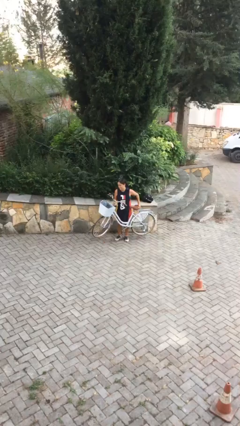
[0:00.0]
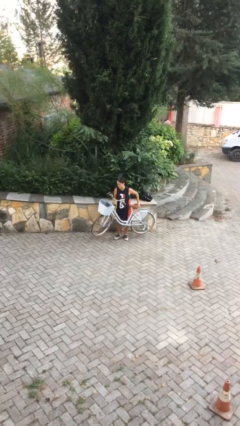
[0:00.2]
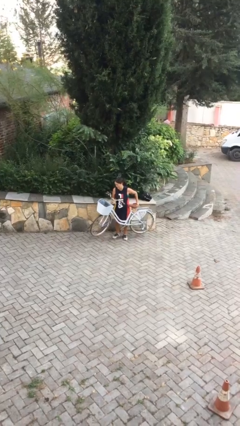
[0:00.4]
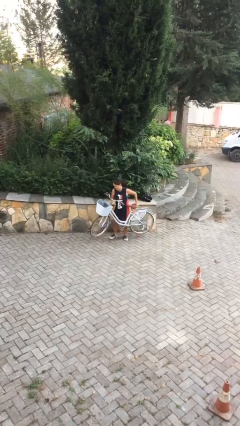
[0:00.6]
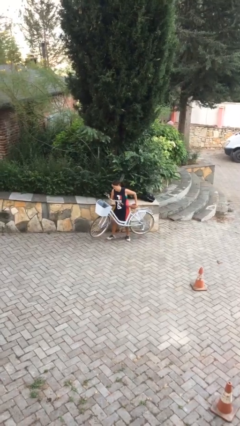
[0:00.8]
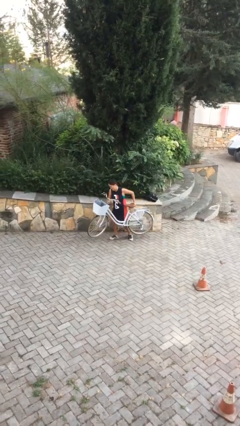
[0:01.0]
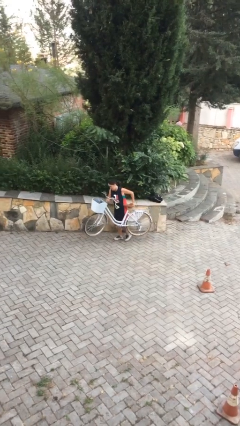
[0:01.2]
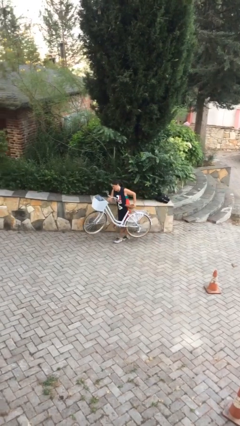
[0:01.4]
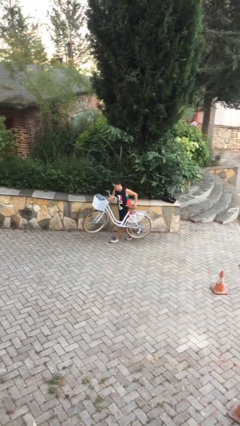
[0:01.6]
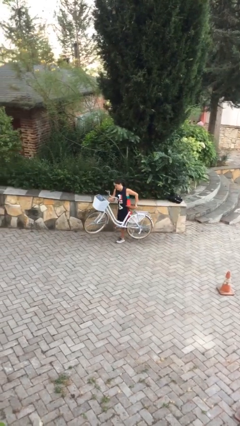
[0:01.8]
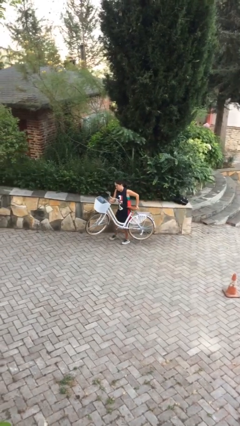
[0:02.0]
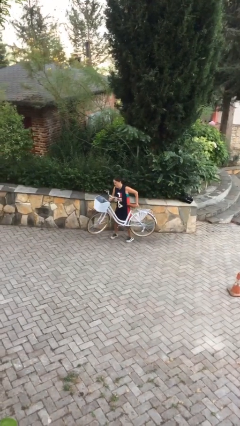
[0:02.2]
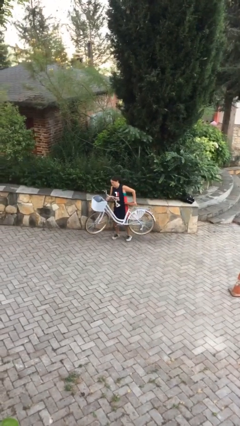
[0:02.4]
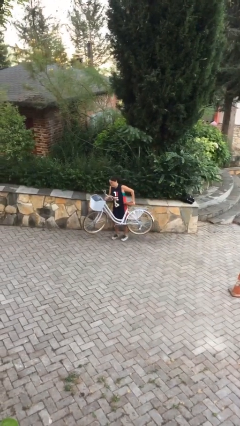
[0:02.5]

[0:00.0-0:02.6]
person carries bicycle

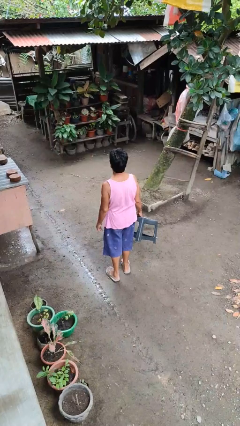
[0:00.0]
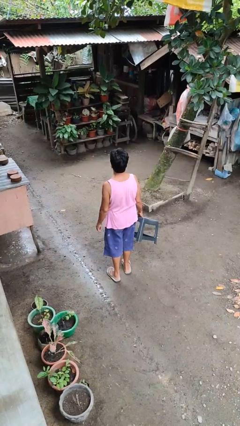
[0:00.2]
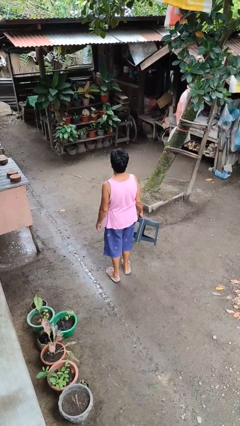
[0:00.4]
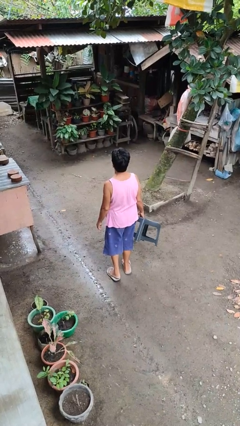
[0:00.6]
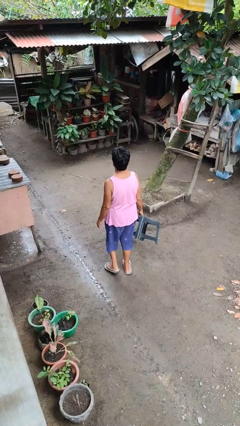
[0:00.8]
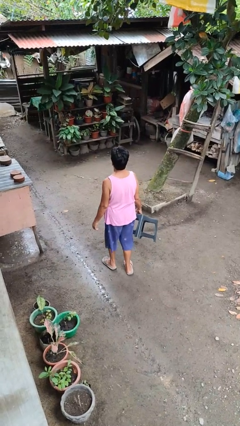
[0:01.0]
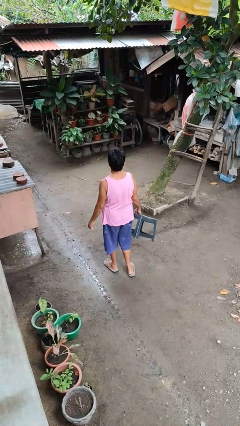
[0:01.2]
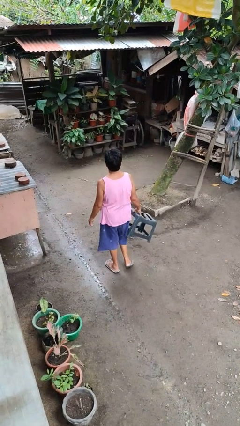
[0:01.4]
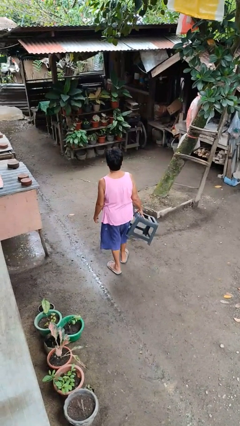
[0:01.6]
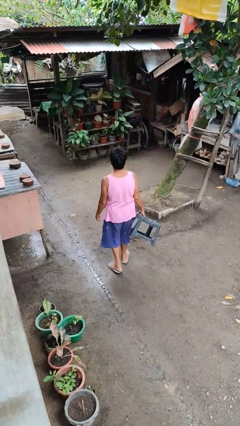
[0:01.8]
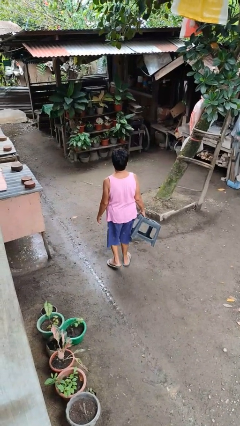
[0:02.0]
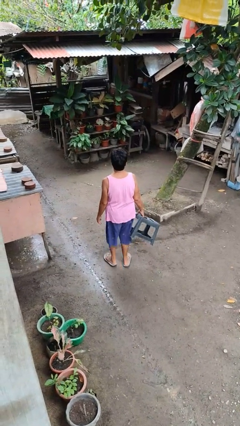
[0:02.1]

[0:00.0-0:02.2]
person carries furniture

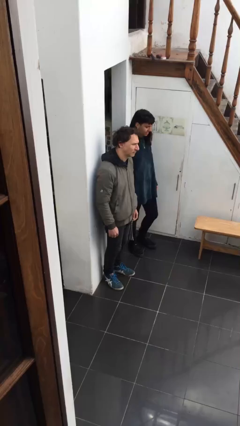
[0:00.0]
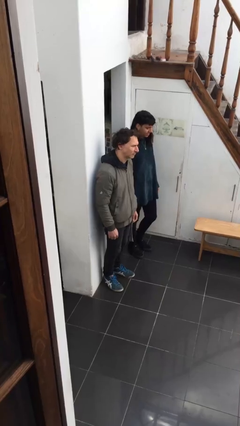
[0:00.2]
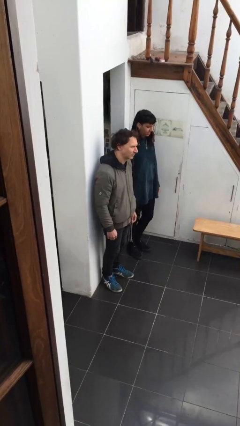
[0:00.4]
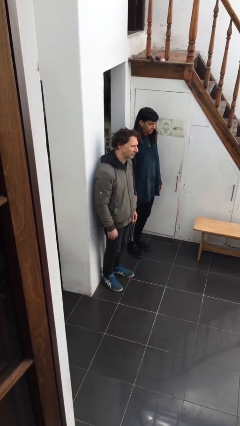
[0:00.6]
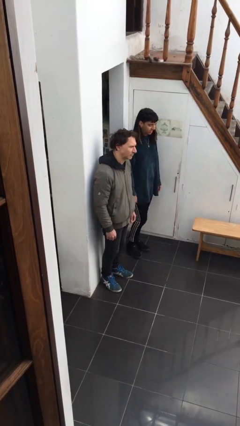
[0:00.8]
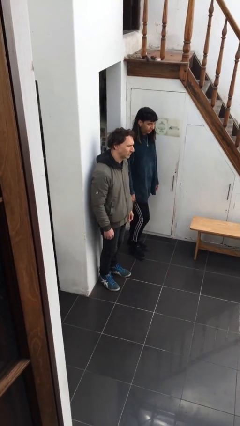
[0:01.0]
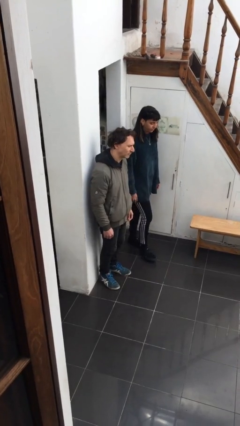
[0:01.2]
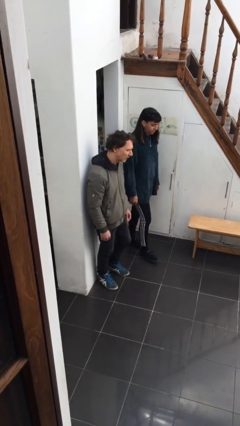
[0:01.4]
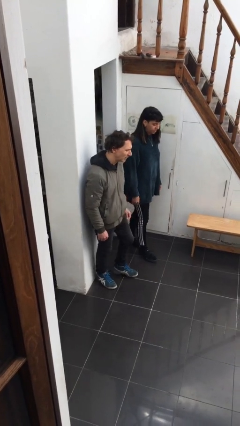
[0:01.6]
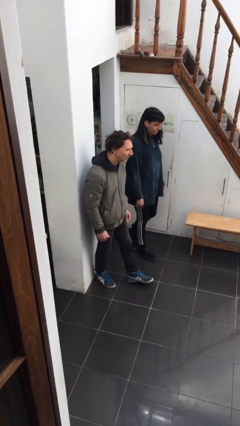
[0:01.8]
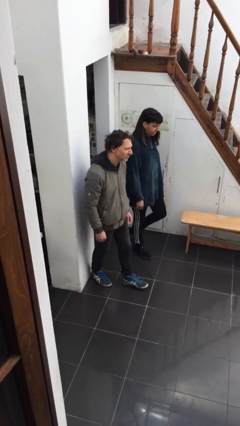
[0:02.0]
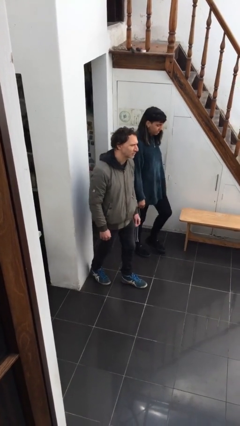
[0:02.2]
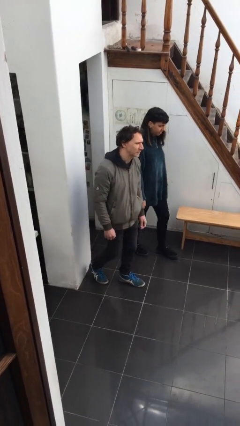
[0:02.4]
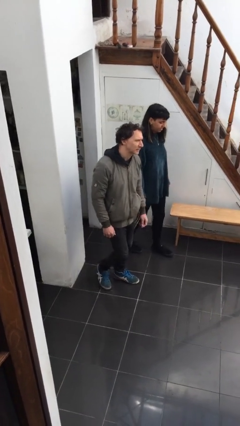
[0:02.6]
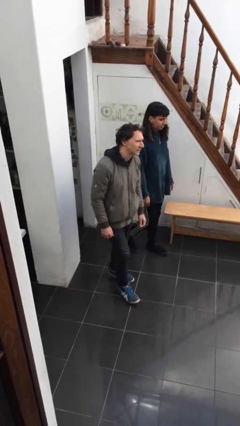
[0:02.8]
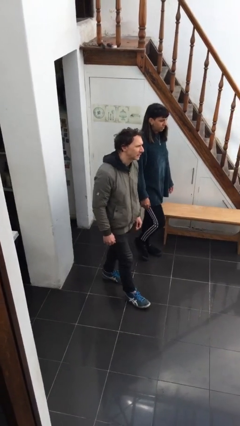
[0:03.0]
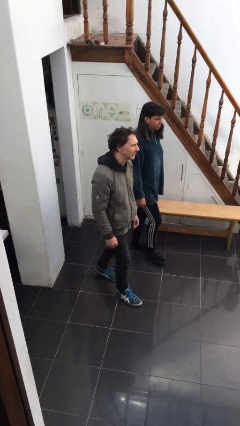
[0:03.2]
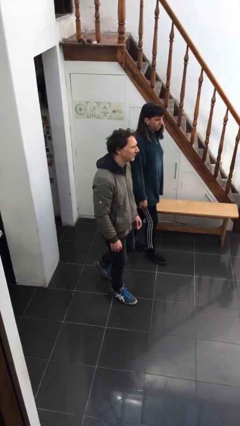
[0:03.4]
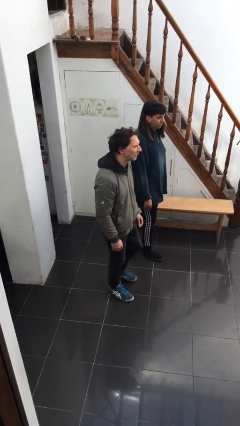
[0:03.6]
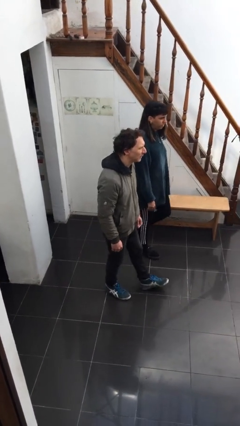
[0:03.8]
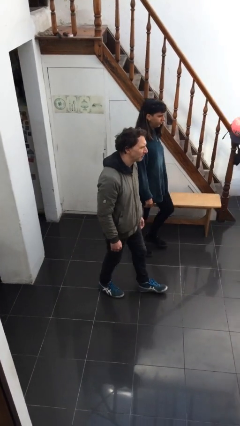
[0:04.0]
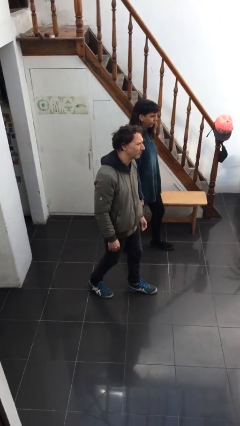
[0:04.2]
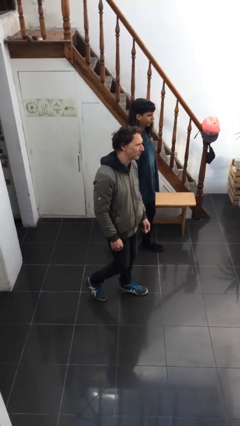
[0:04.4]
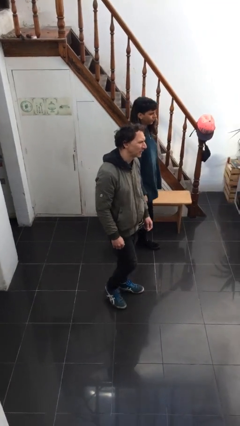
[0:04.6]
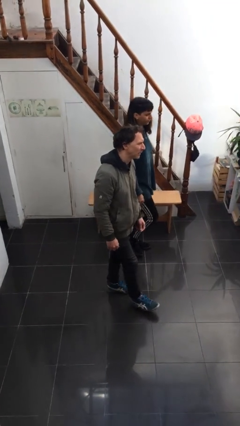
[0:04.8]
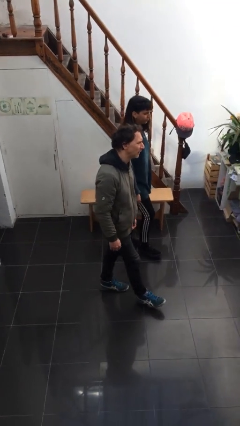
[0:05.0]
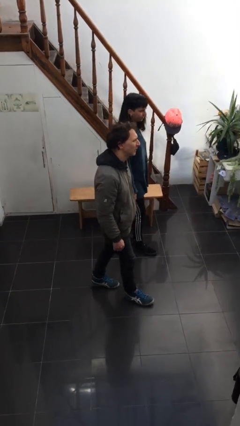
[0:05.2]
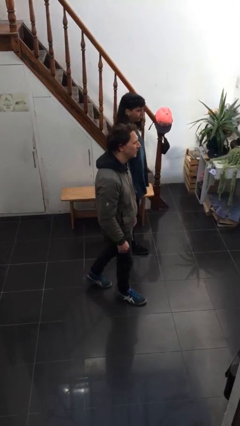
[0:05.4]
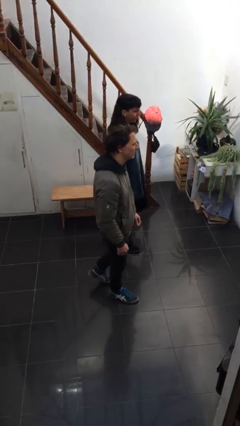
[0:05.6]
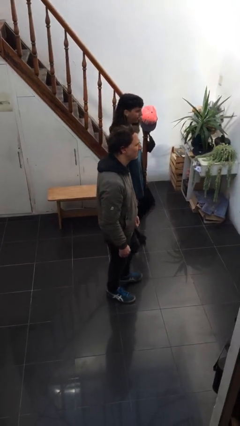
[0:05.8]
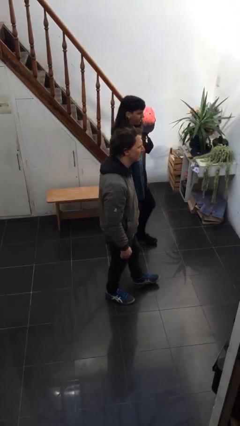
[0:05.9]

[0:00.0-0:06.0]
person talks to person

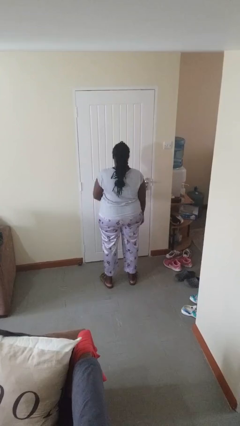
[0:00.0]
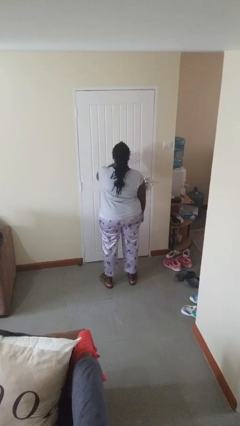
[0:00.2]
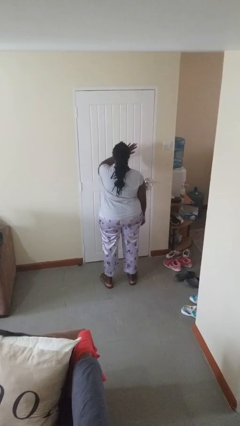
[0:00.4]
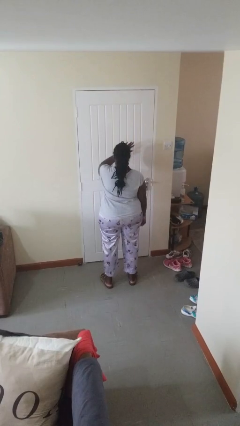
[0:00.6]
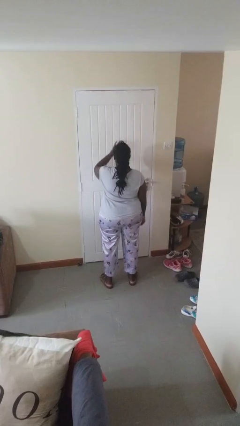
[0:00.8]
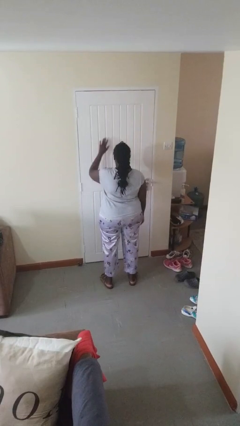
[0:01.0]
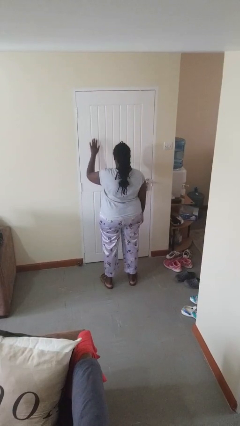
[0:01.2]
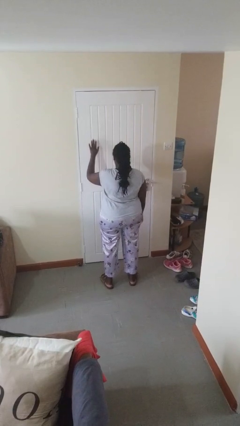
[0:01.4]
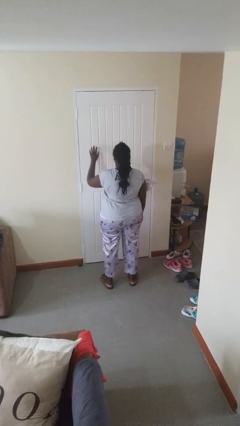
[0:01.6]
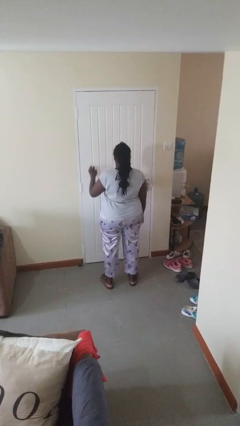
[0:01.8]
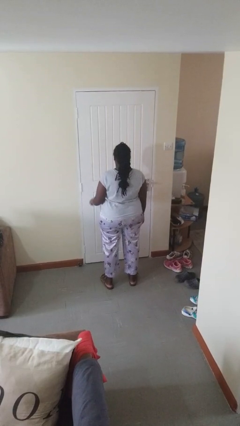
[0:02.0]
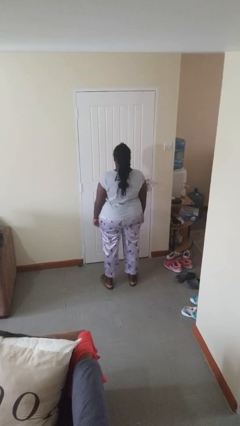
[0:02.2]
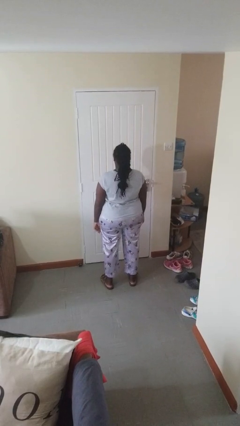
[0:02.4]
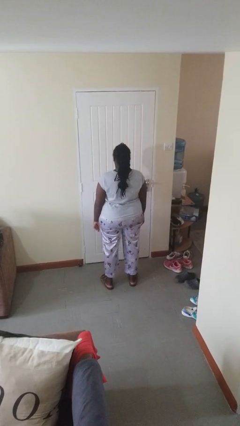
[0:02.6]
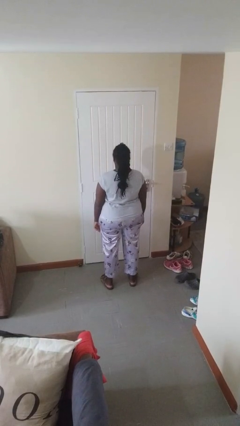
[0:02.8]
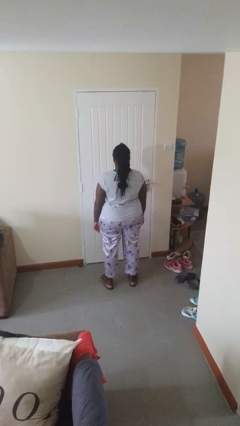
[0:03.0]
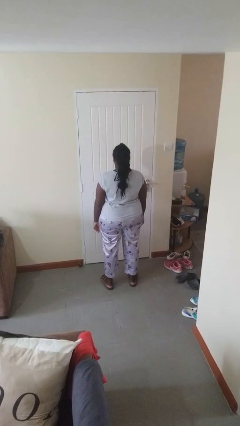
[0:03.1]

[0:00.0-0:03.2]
person gestures swipe left

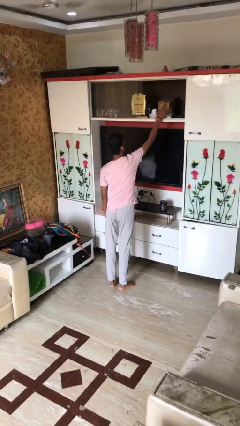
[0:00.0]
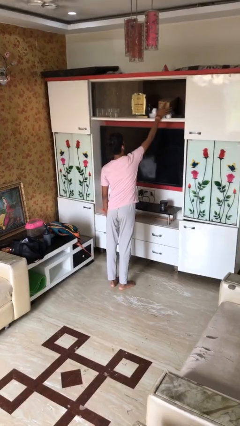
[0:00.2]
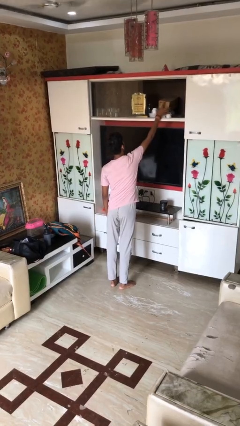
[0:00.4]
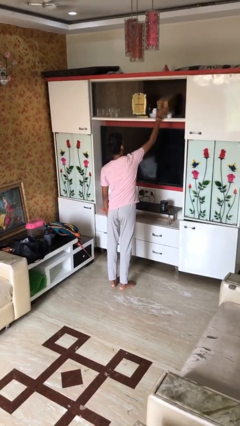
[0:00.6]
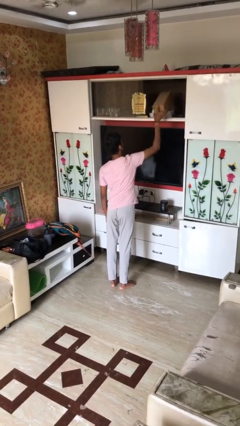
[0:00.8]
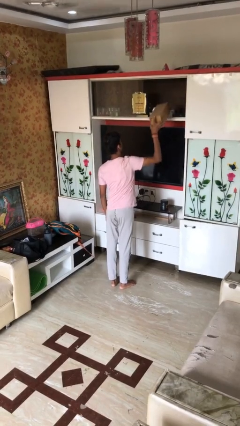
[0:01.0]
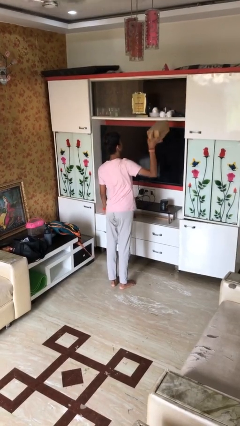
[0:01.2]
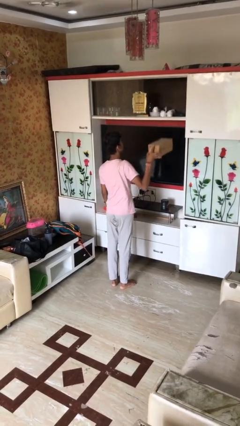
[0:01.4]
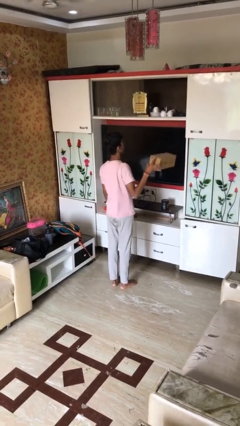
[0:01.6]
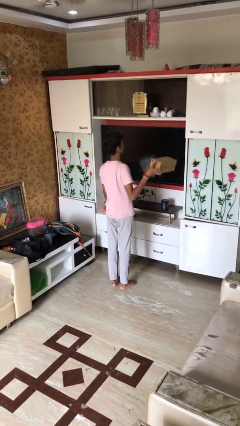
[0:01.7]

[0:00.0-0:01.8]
person picks up object from shelf

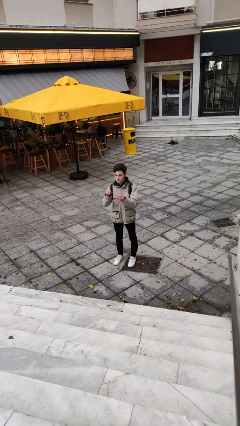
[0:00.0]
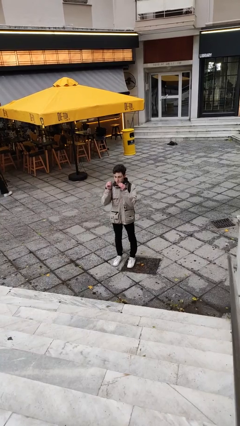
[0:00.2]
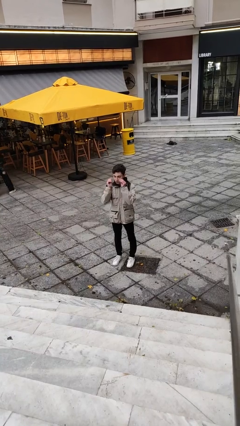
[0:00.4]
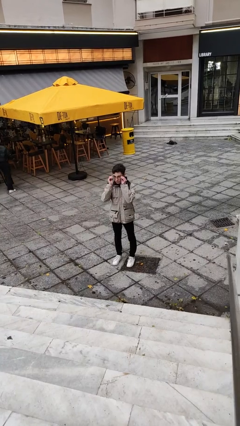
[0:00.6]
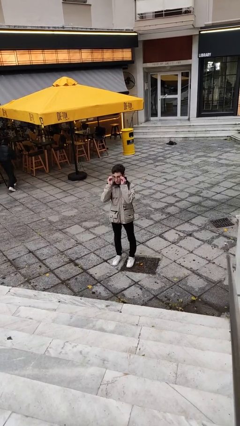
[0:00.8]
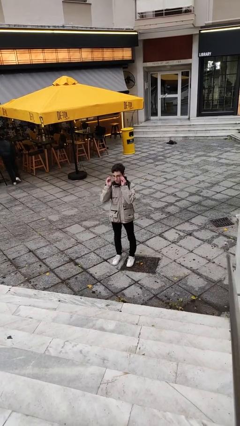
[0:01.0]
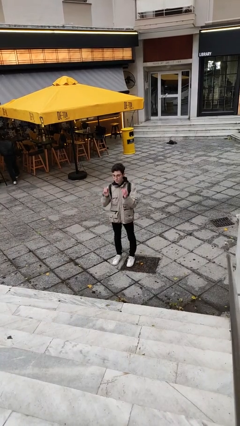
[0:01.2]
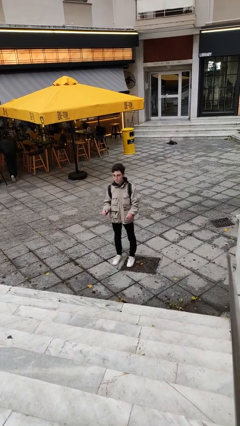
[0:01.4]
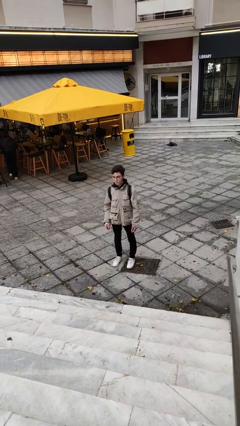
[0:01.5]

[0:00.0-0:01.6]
person puts on glasses
